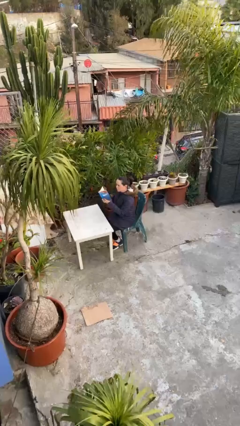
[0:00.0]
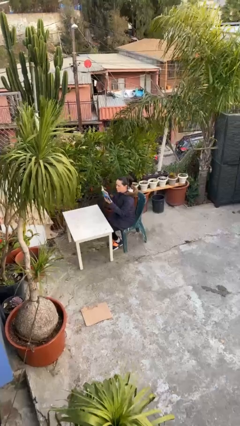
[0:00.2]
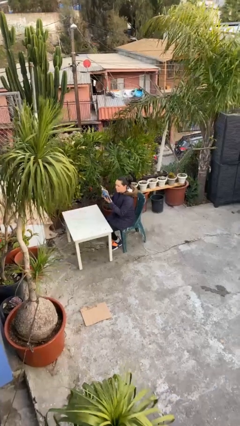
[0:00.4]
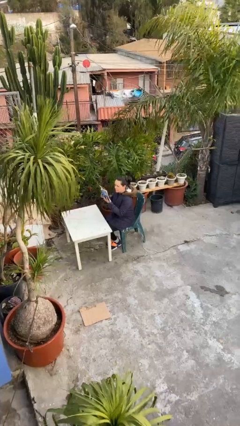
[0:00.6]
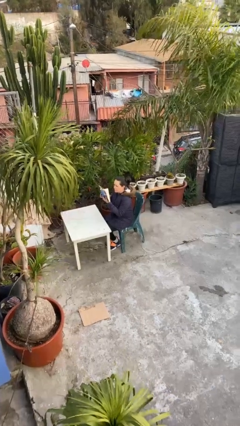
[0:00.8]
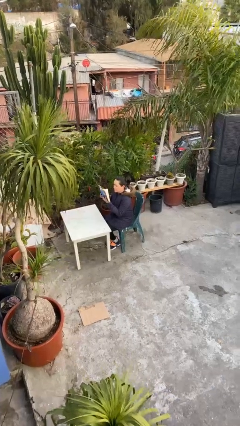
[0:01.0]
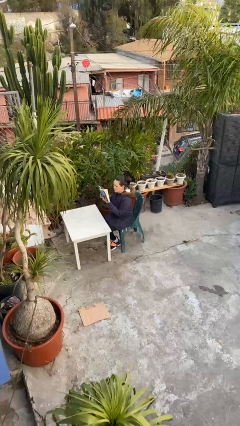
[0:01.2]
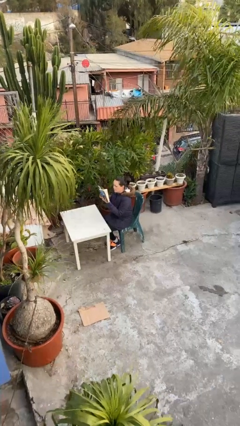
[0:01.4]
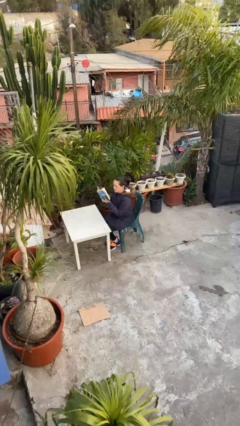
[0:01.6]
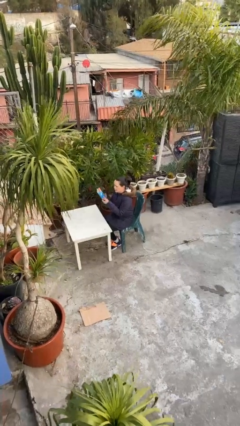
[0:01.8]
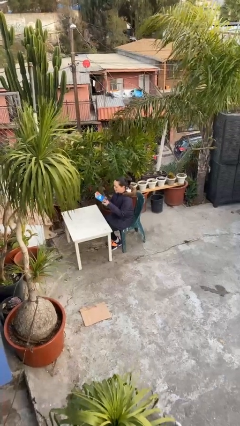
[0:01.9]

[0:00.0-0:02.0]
person reads document

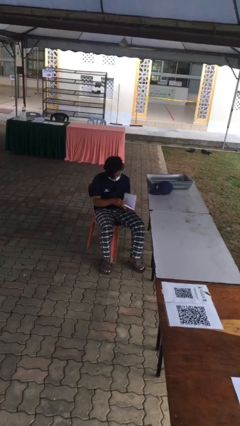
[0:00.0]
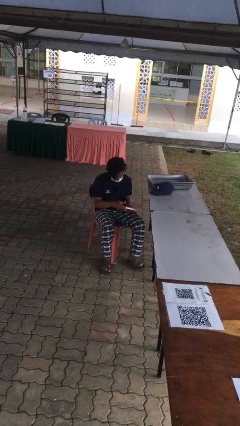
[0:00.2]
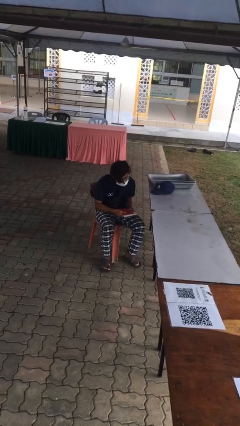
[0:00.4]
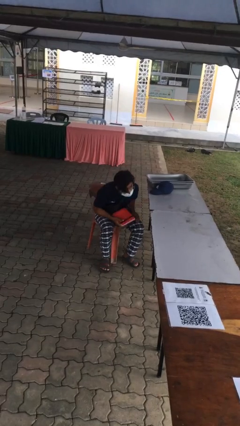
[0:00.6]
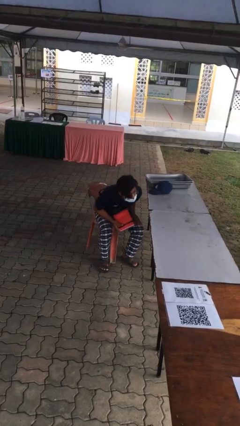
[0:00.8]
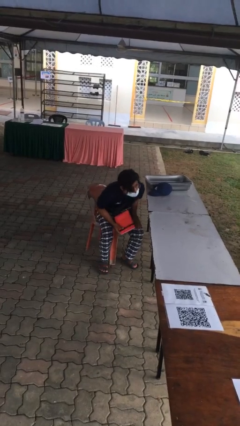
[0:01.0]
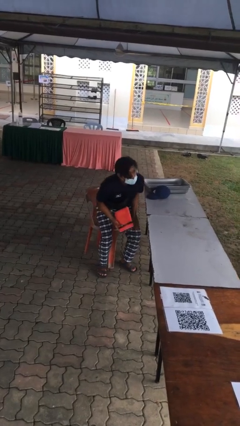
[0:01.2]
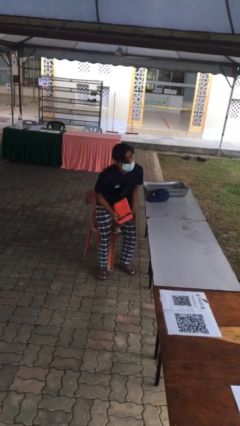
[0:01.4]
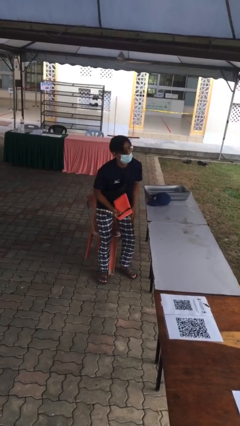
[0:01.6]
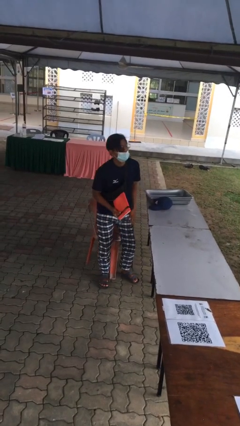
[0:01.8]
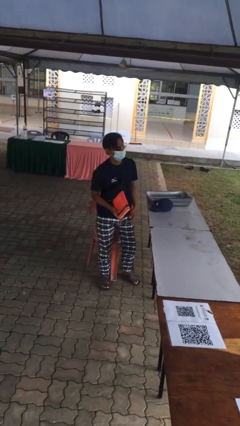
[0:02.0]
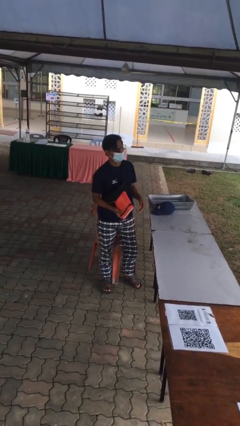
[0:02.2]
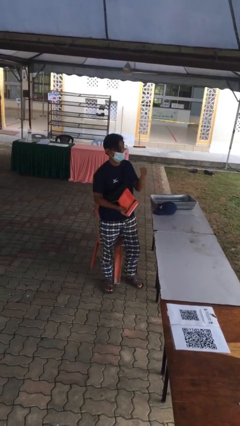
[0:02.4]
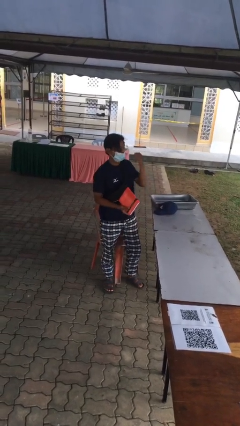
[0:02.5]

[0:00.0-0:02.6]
person stands up

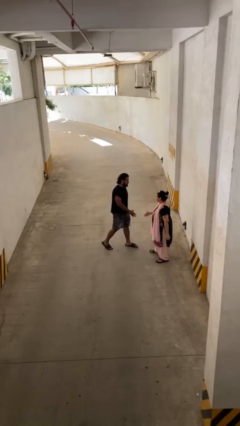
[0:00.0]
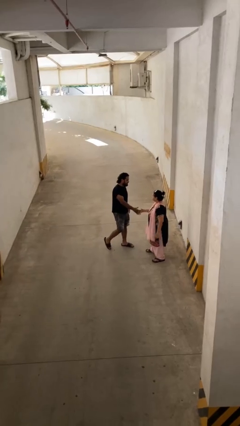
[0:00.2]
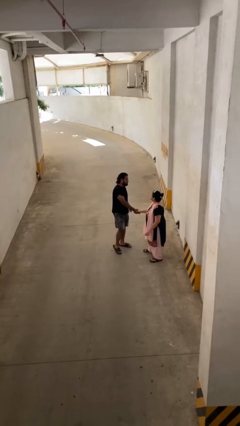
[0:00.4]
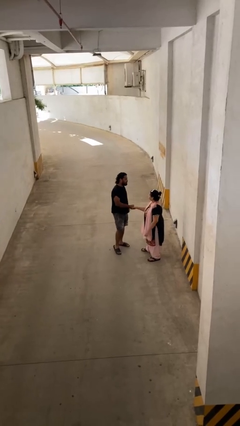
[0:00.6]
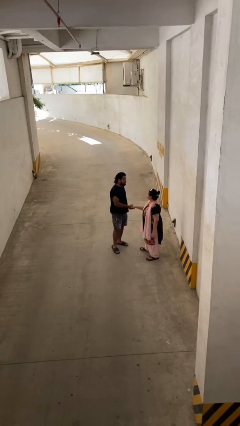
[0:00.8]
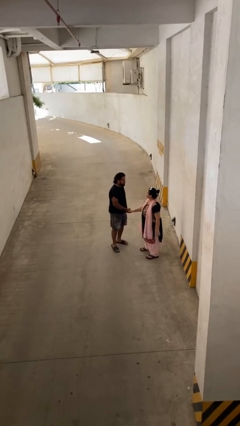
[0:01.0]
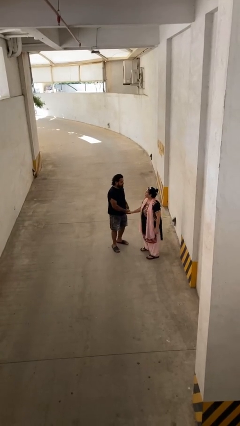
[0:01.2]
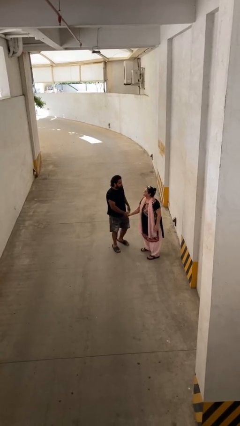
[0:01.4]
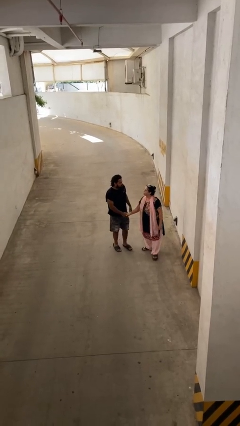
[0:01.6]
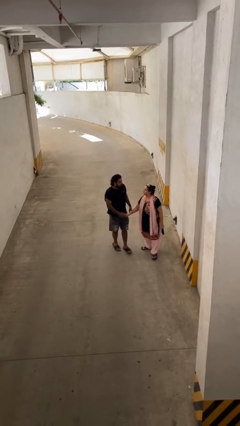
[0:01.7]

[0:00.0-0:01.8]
person shakes hand

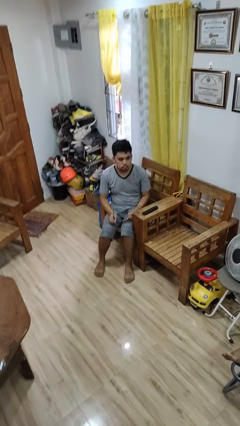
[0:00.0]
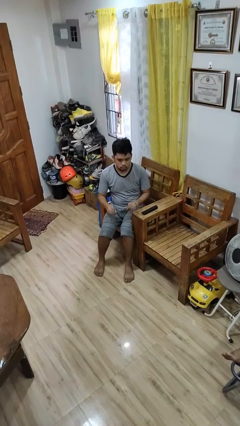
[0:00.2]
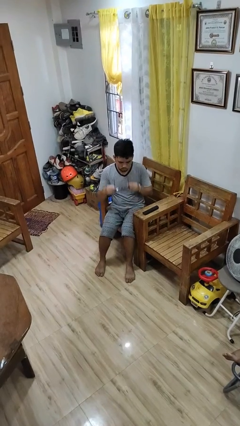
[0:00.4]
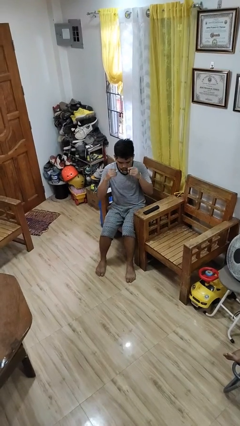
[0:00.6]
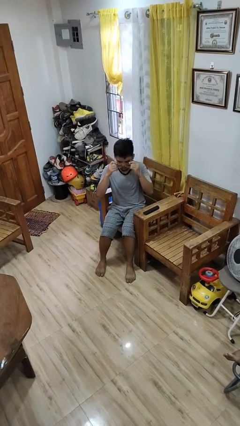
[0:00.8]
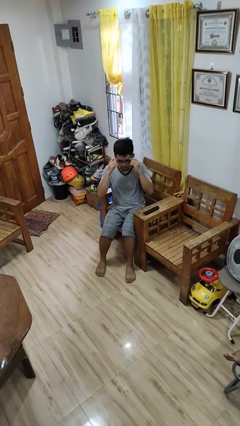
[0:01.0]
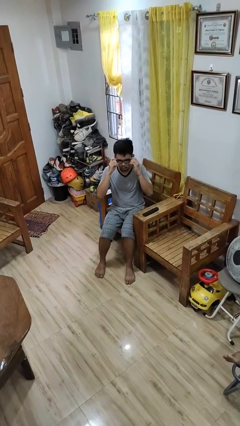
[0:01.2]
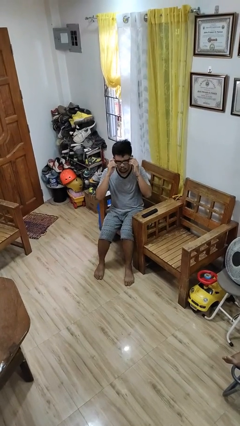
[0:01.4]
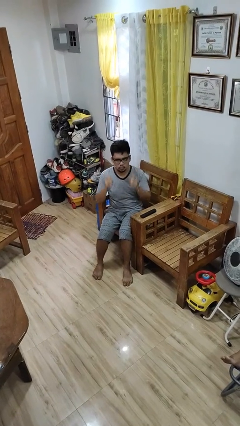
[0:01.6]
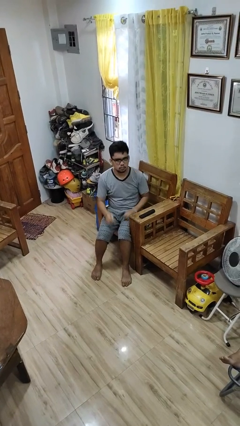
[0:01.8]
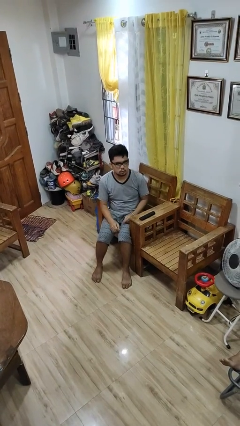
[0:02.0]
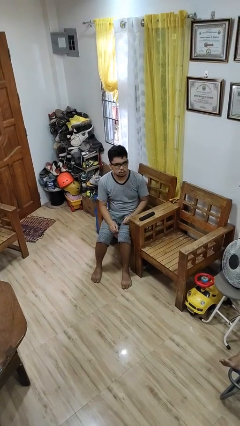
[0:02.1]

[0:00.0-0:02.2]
person puts on glasses

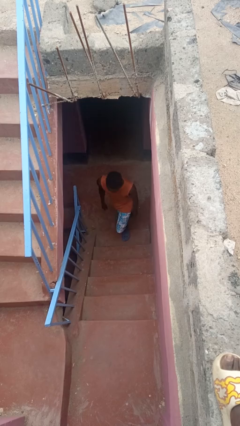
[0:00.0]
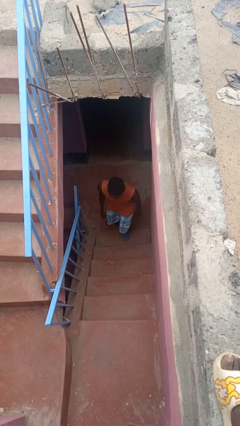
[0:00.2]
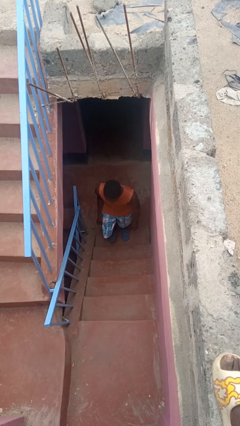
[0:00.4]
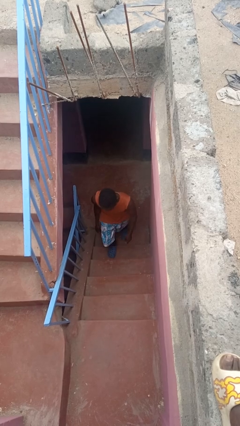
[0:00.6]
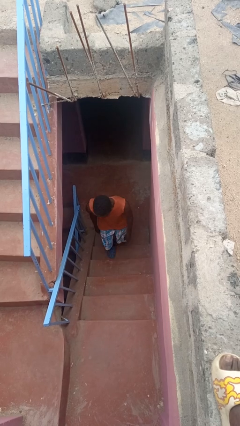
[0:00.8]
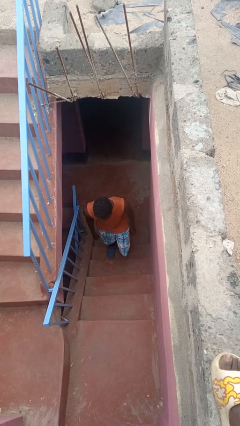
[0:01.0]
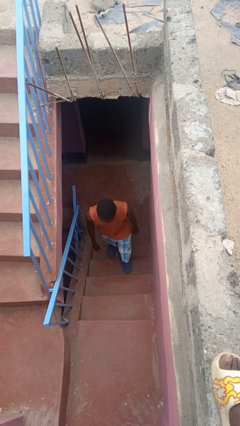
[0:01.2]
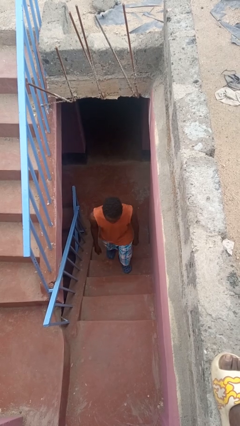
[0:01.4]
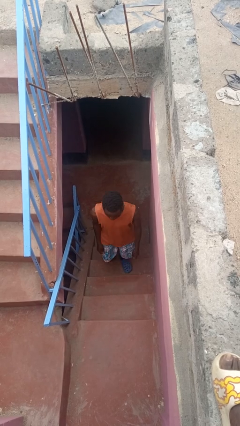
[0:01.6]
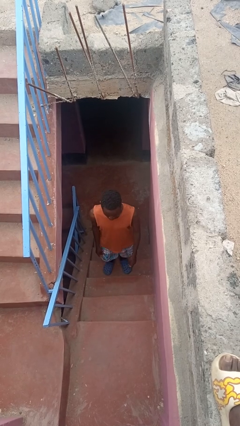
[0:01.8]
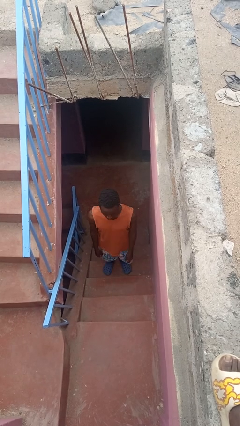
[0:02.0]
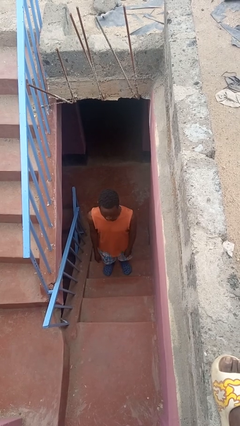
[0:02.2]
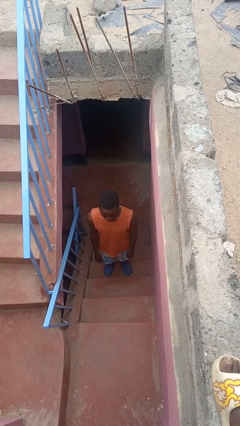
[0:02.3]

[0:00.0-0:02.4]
person climbs up stairs

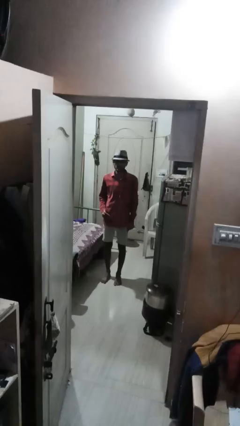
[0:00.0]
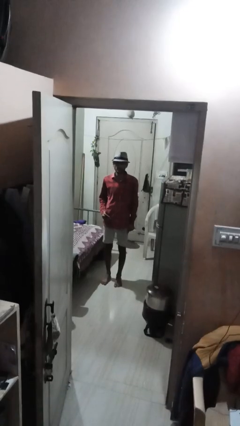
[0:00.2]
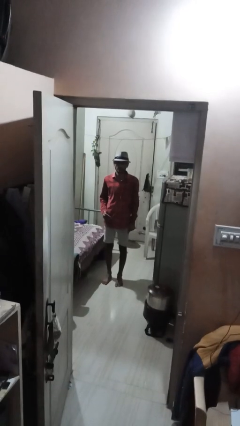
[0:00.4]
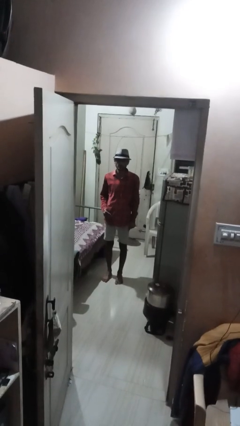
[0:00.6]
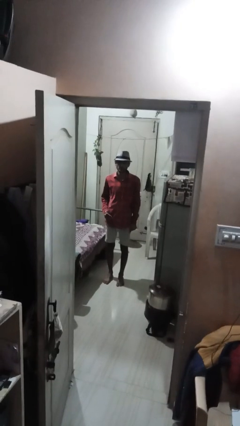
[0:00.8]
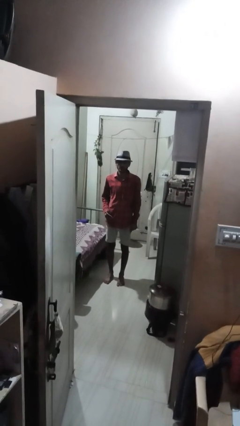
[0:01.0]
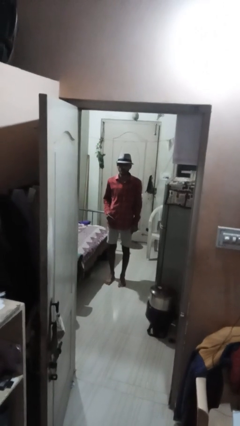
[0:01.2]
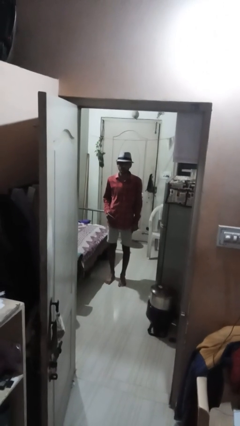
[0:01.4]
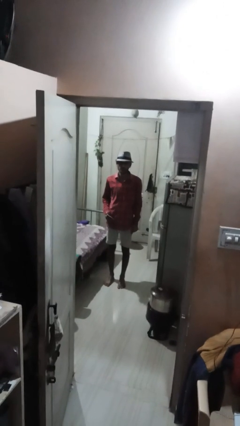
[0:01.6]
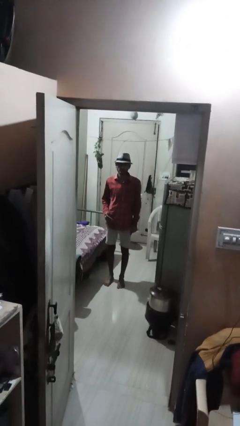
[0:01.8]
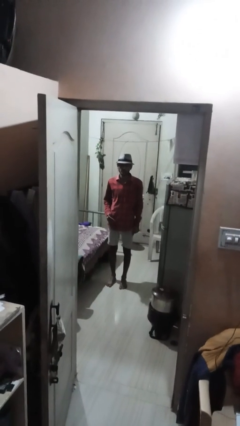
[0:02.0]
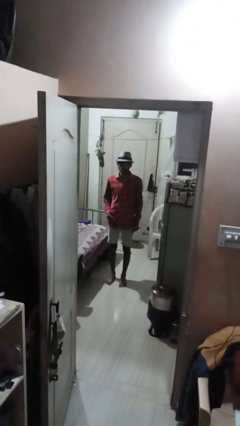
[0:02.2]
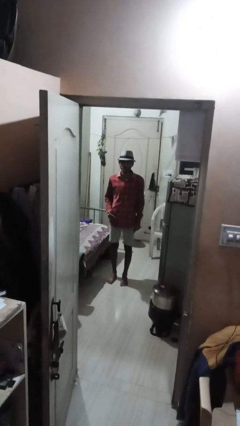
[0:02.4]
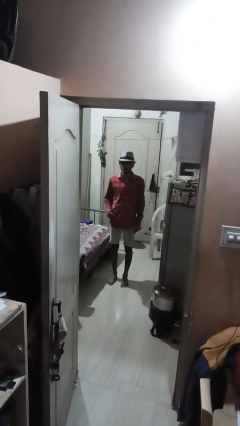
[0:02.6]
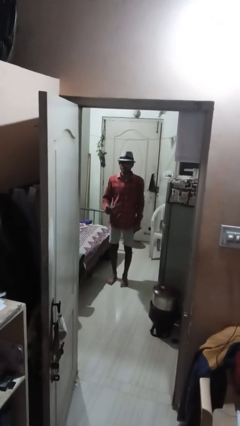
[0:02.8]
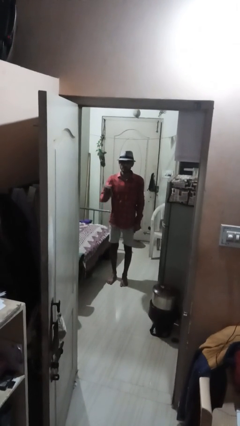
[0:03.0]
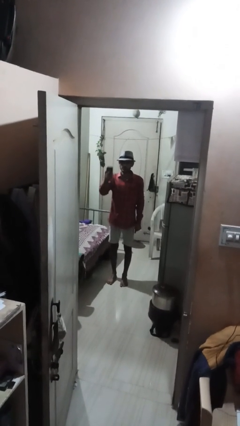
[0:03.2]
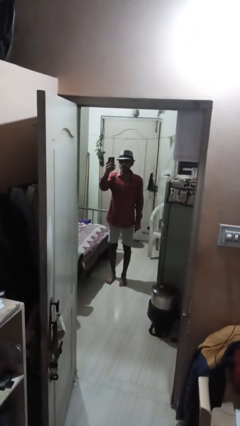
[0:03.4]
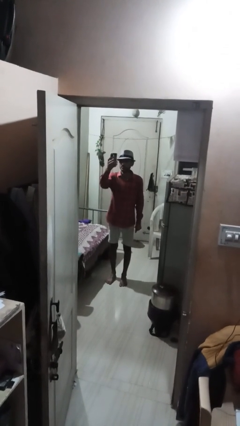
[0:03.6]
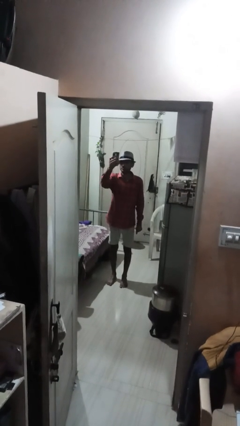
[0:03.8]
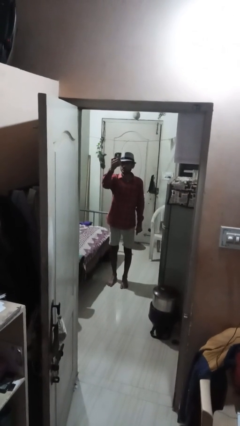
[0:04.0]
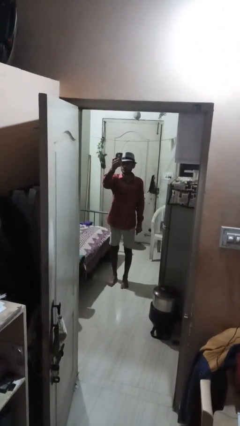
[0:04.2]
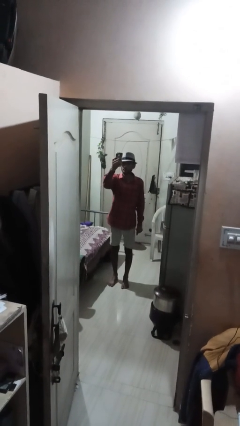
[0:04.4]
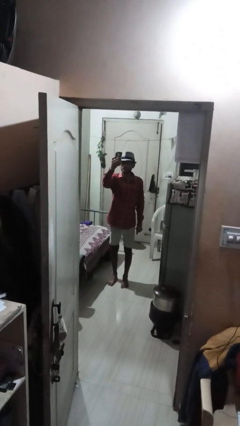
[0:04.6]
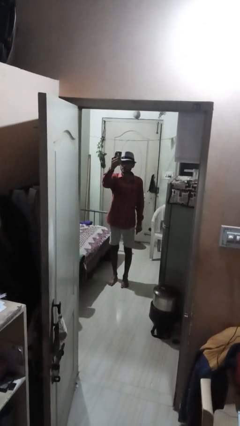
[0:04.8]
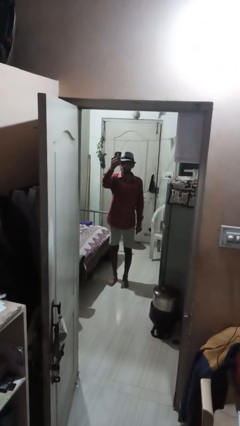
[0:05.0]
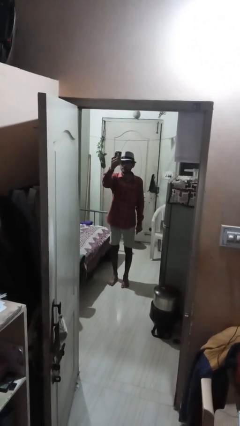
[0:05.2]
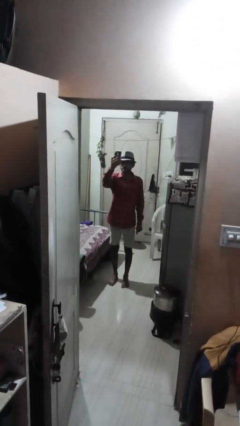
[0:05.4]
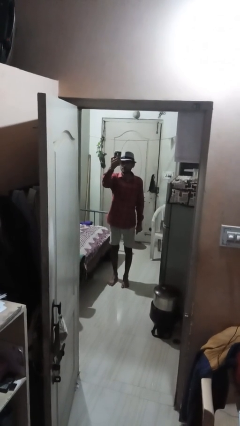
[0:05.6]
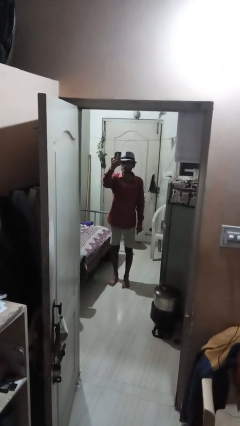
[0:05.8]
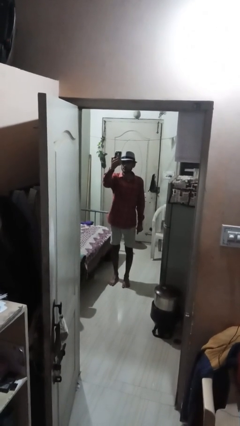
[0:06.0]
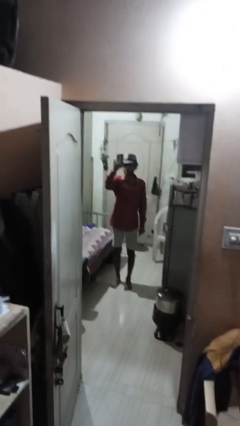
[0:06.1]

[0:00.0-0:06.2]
person takes selfie

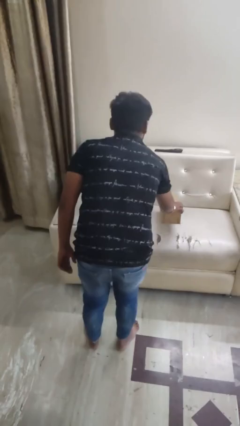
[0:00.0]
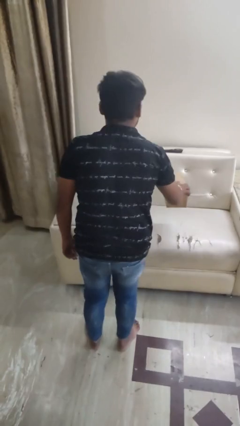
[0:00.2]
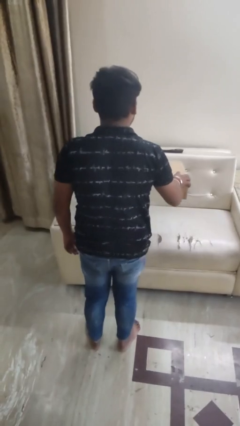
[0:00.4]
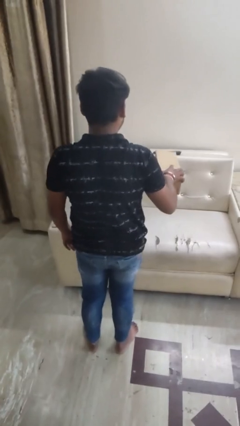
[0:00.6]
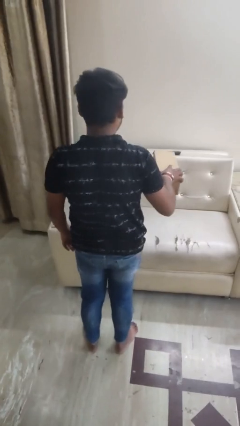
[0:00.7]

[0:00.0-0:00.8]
person picks up object from bed
